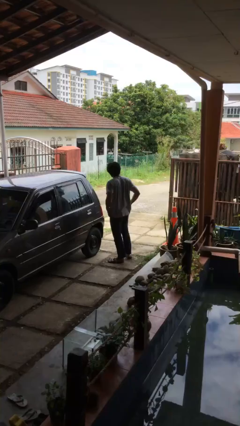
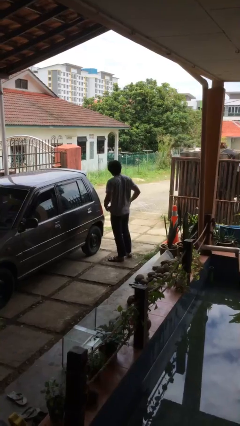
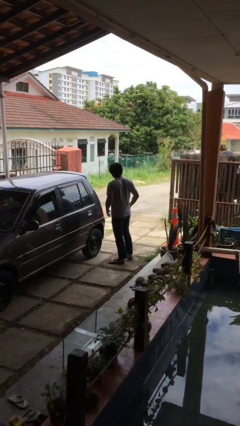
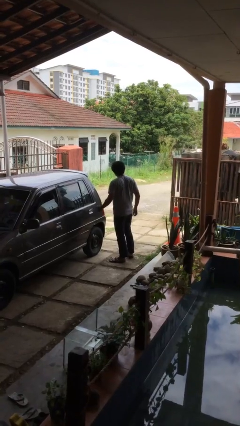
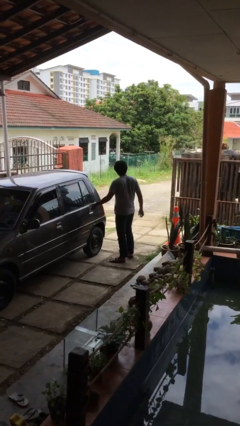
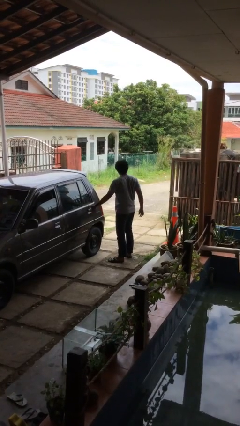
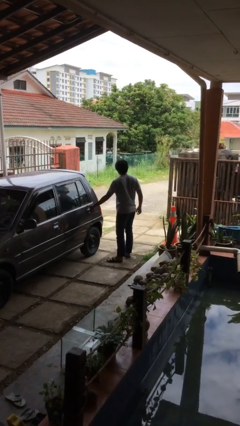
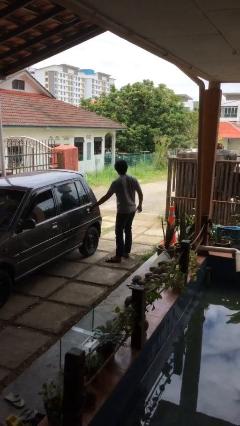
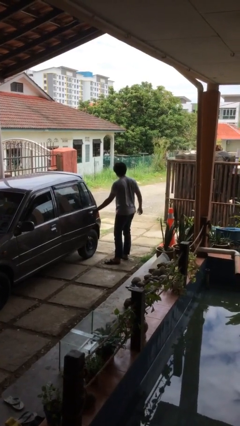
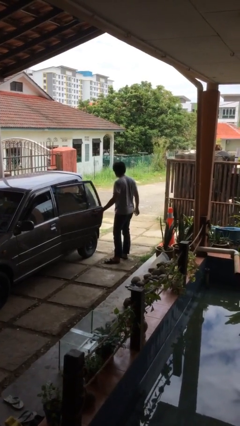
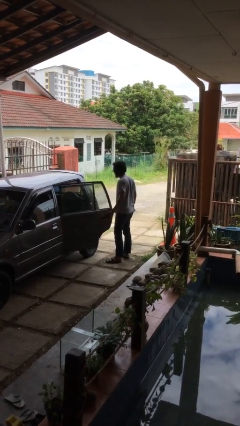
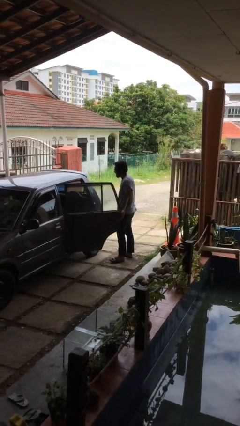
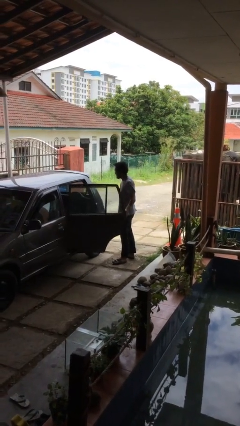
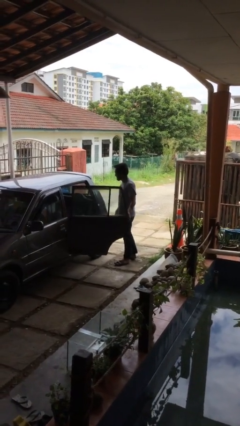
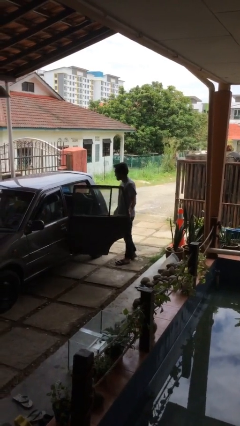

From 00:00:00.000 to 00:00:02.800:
person opens car door

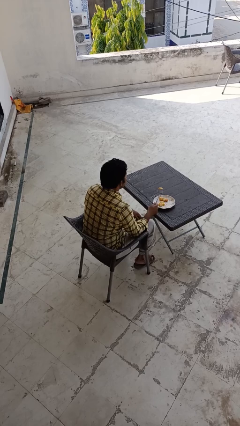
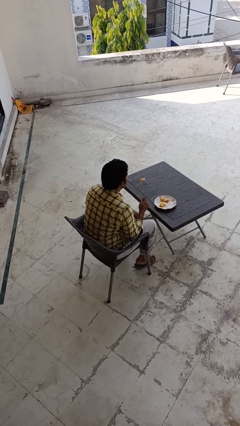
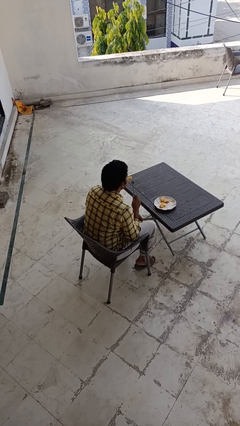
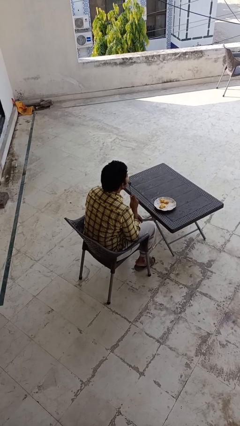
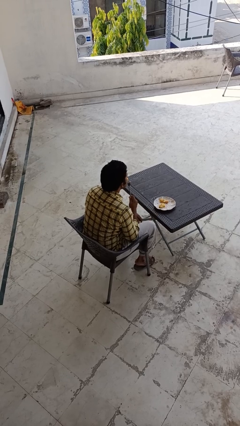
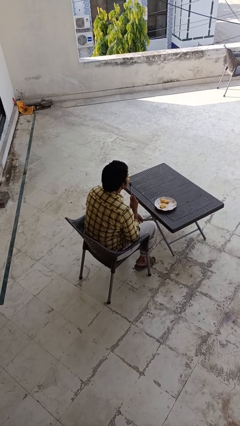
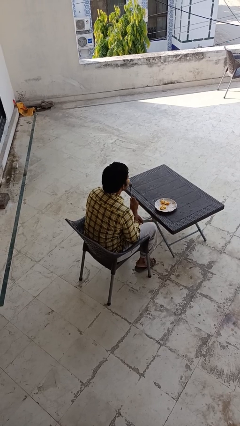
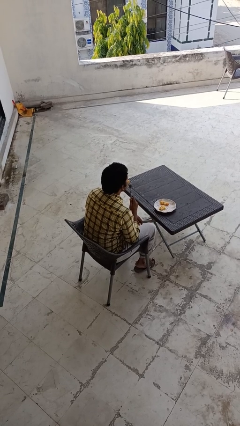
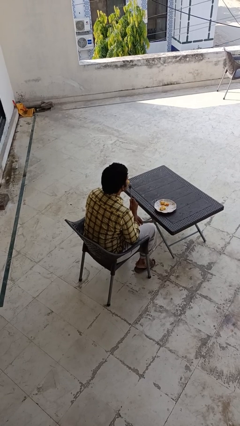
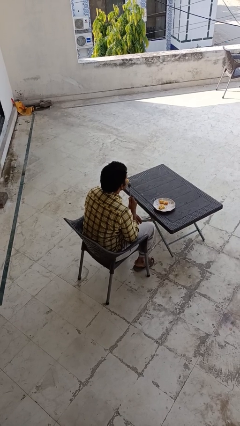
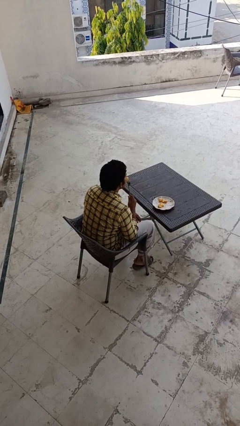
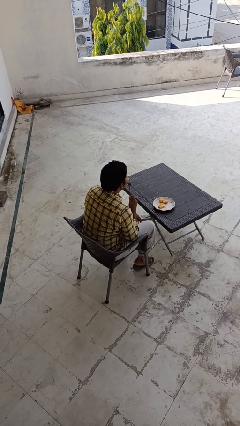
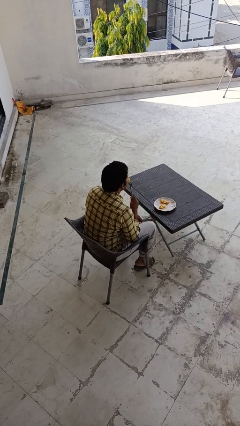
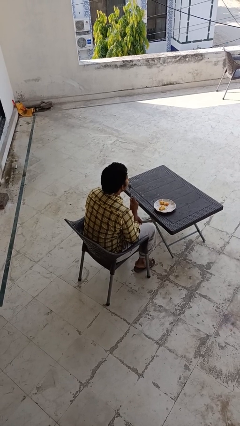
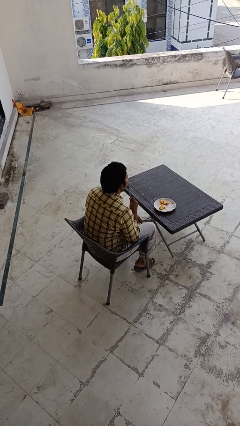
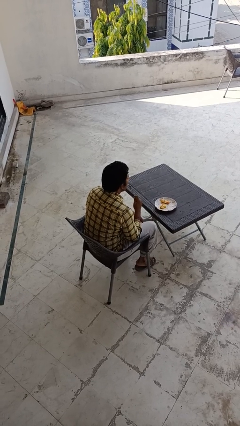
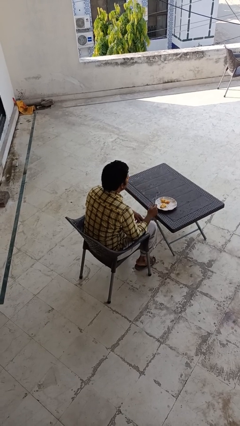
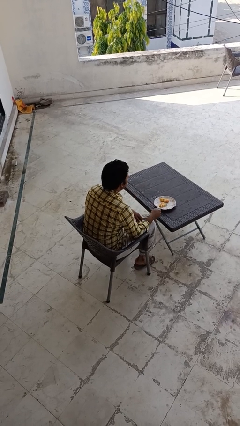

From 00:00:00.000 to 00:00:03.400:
person eats with utensil

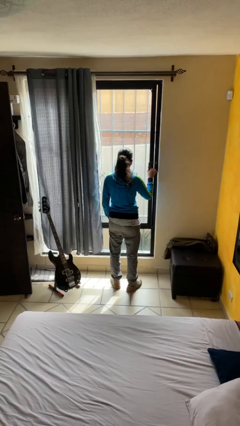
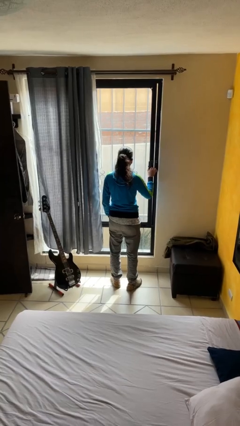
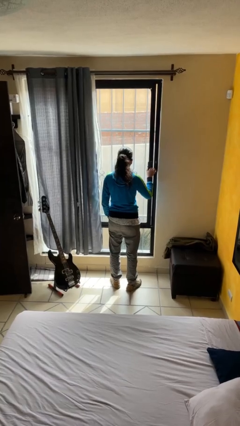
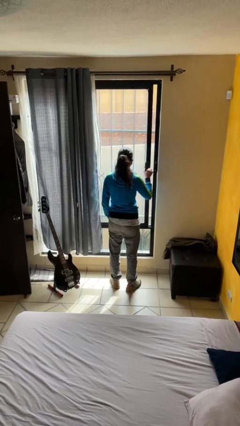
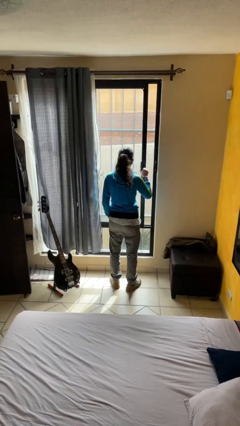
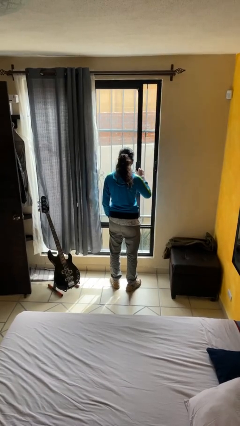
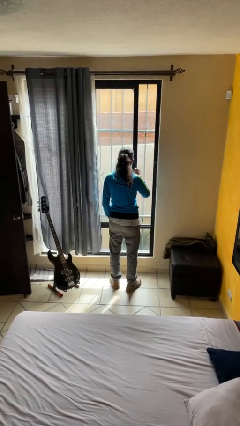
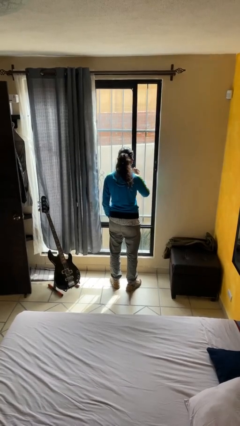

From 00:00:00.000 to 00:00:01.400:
person opens home window

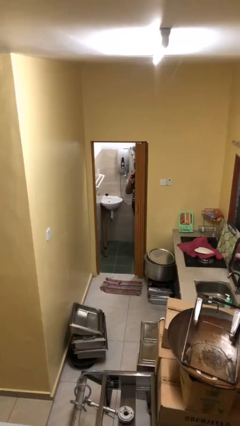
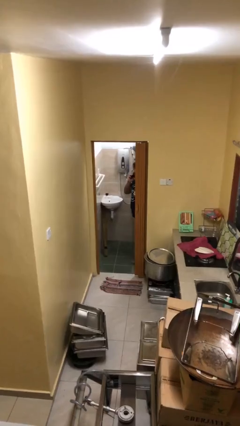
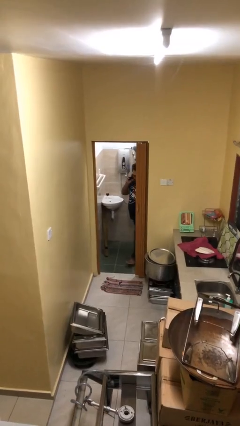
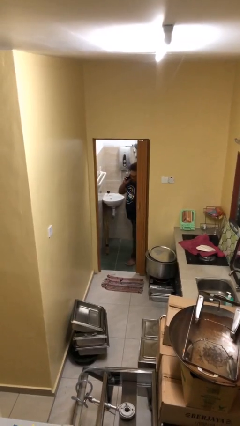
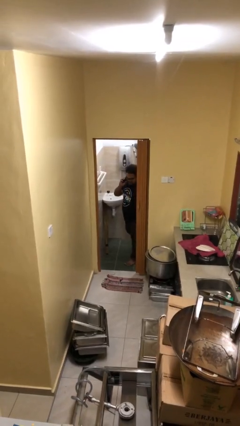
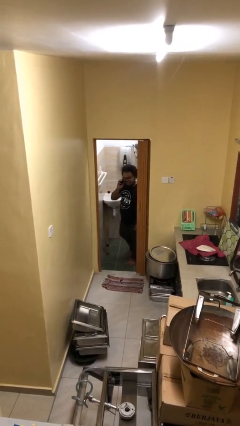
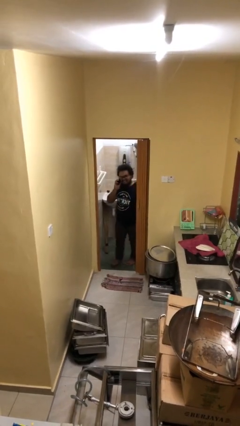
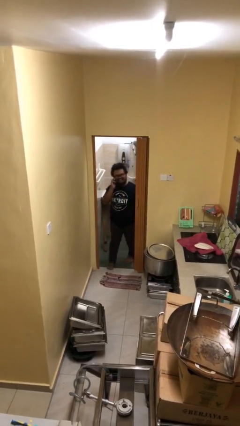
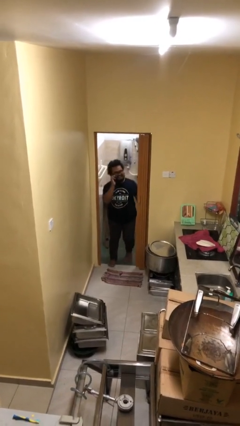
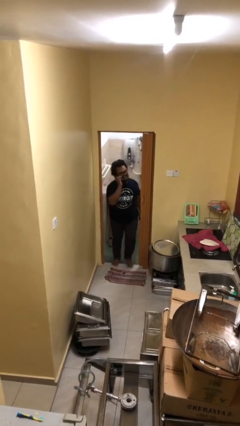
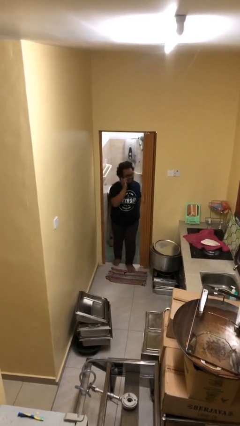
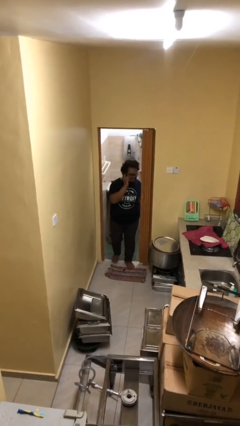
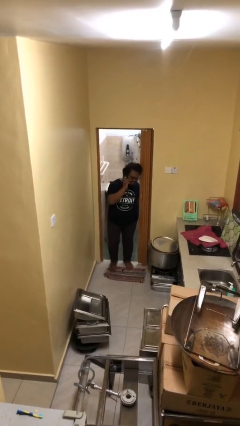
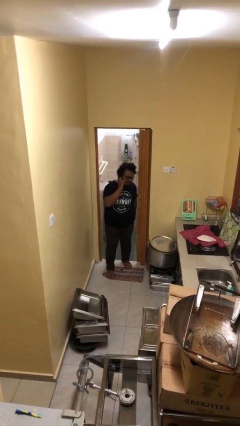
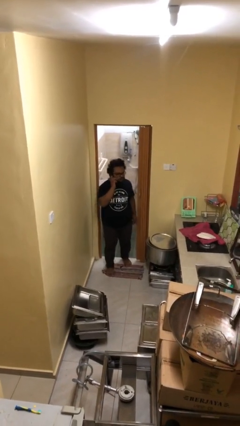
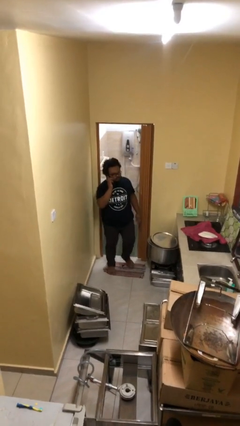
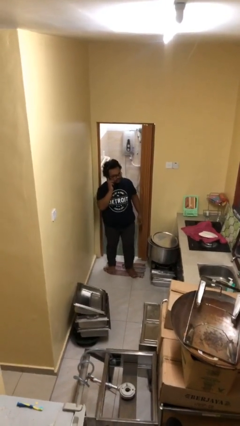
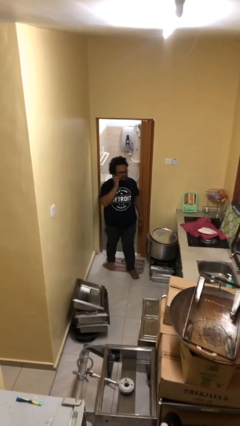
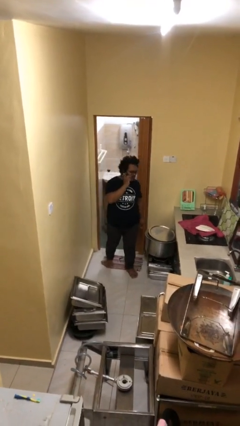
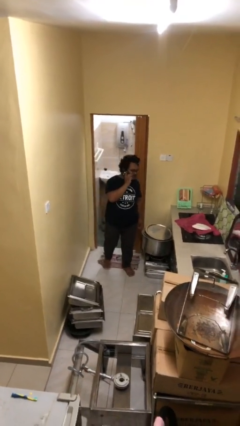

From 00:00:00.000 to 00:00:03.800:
person enters scene through structure

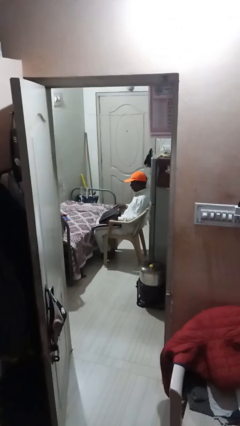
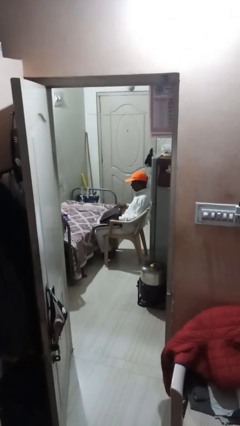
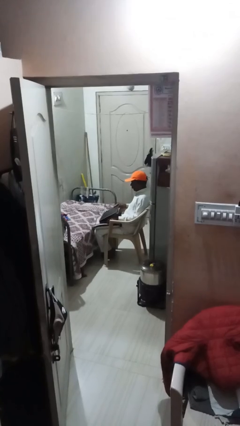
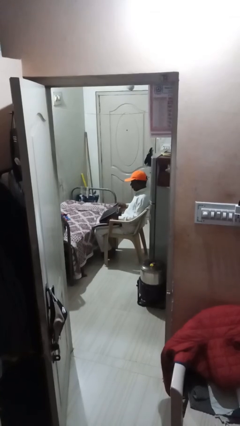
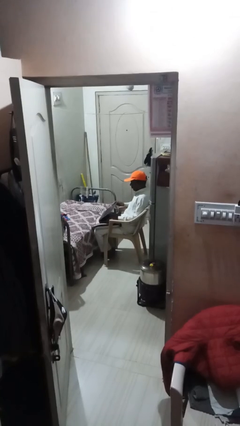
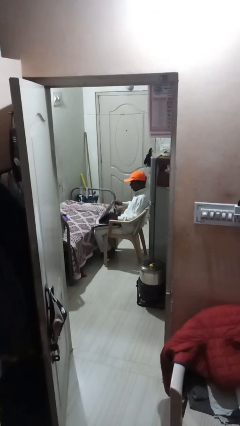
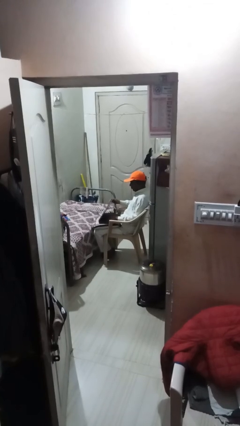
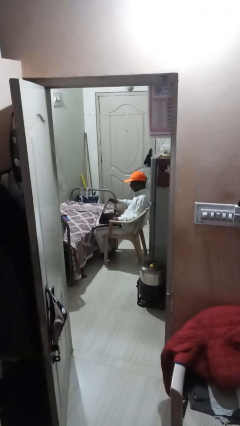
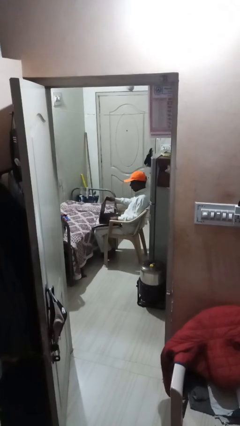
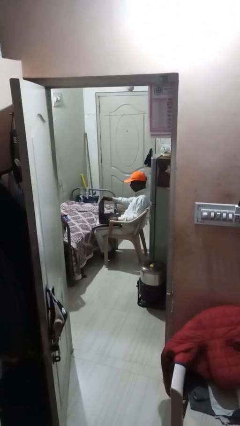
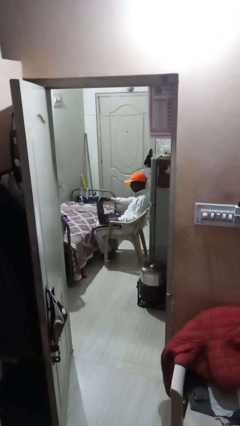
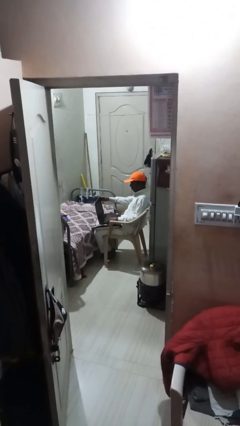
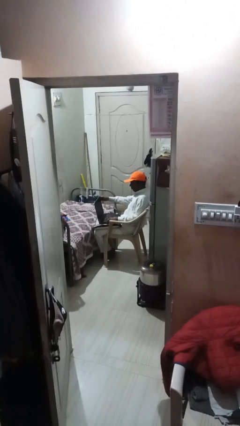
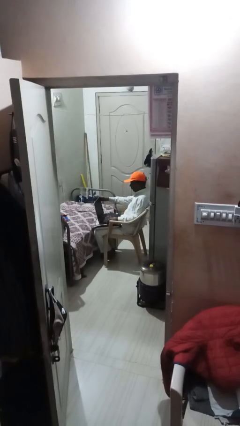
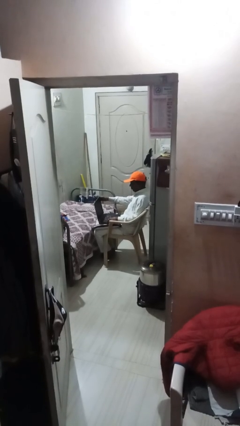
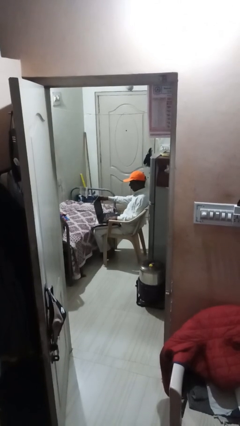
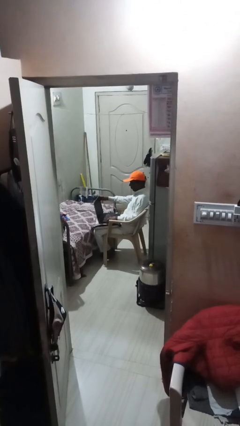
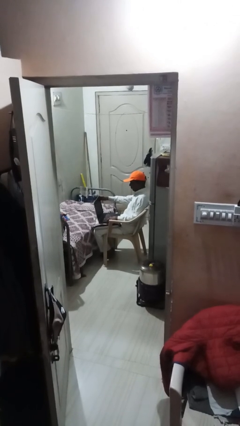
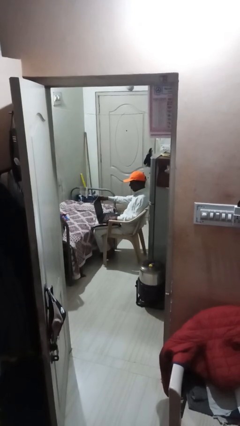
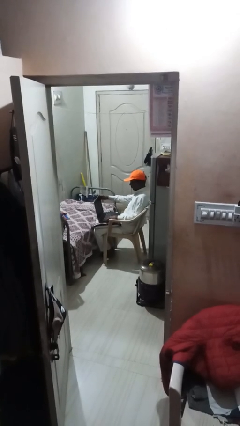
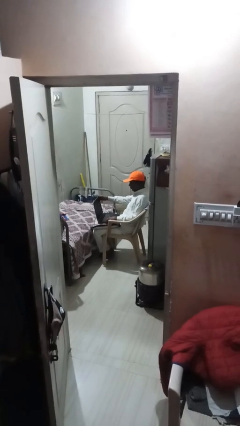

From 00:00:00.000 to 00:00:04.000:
person interacts with laptop

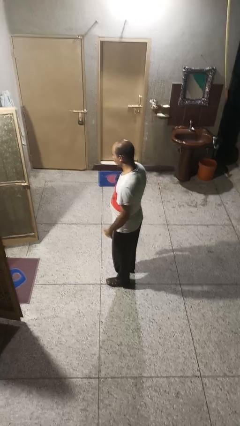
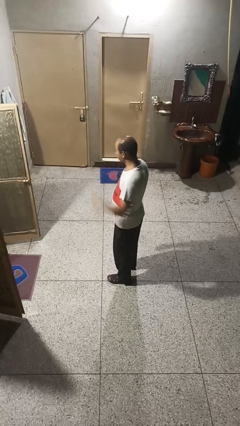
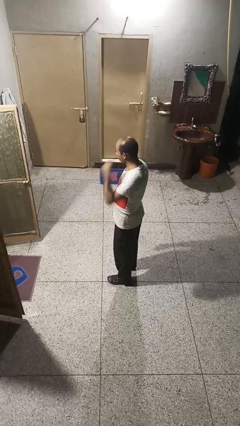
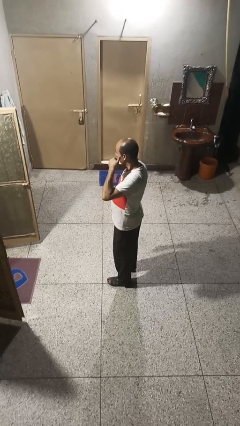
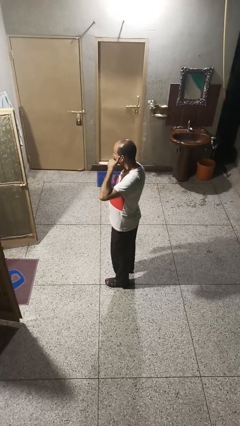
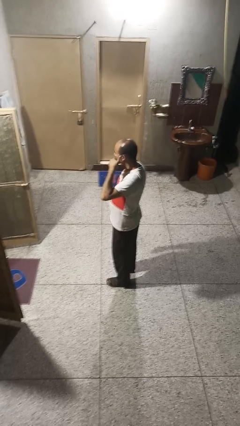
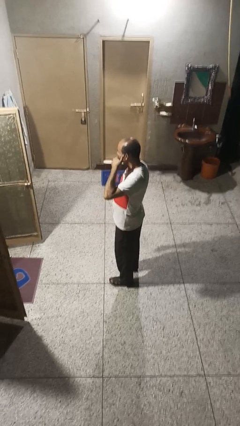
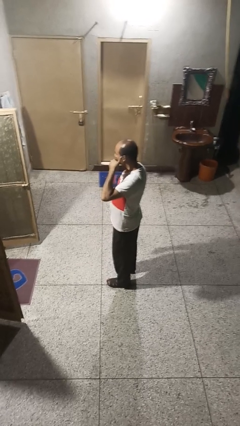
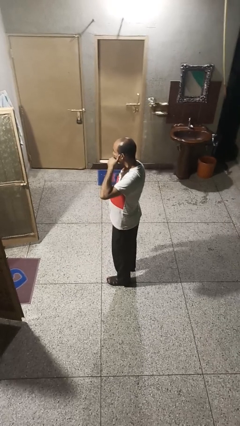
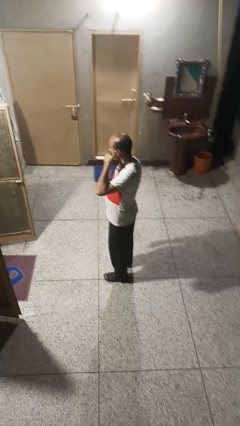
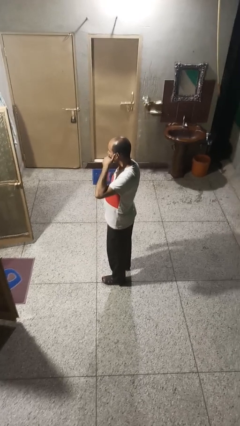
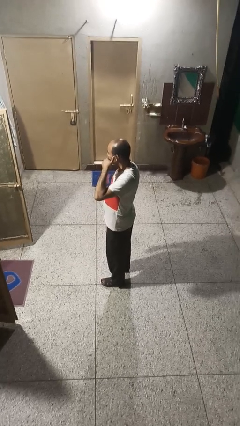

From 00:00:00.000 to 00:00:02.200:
person gestures call me
